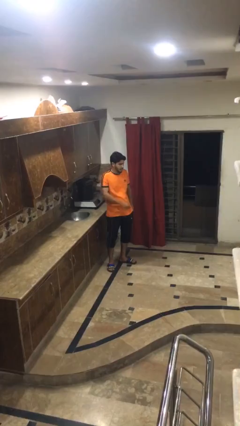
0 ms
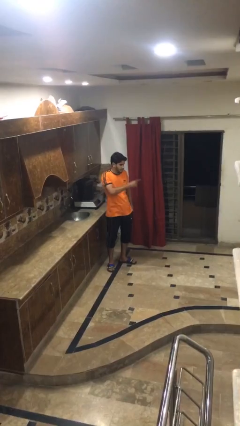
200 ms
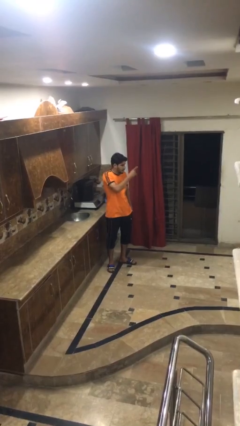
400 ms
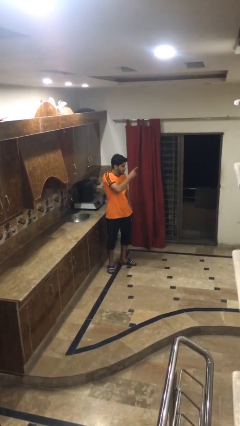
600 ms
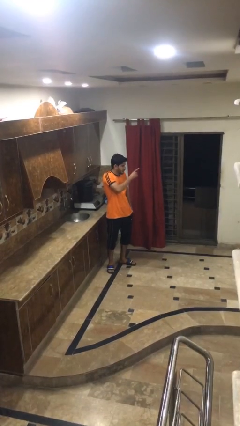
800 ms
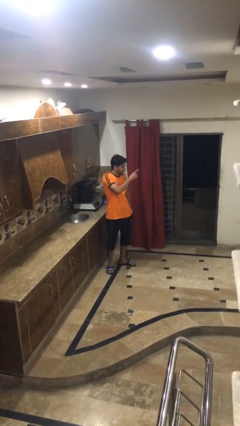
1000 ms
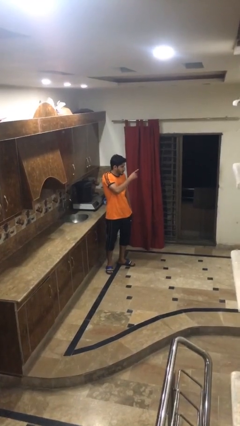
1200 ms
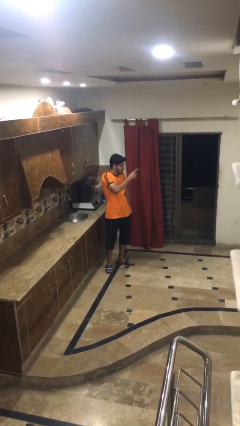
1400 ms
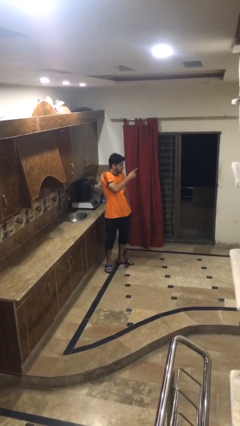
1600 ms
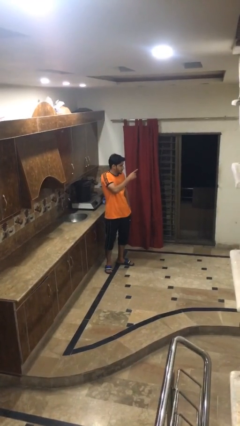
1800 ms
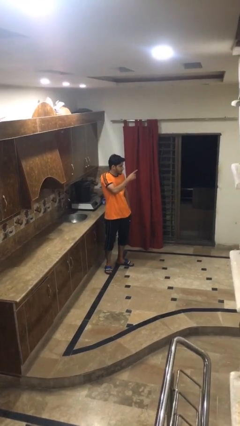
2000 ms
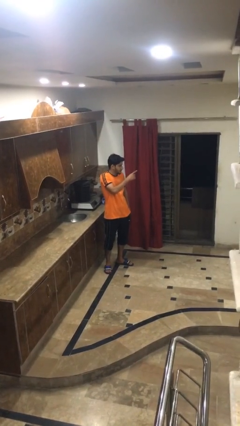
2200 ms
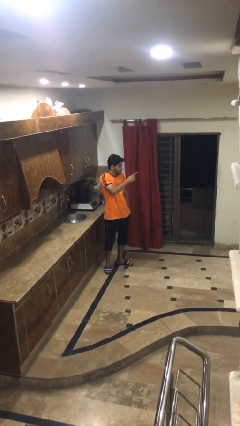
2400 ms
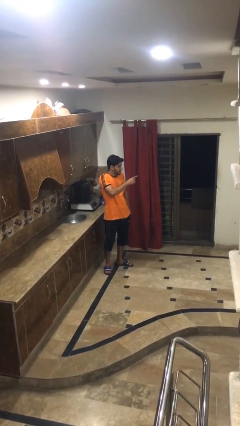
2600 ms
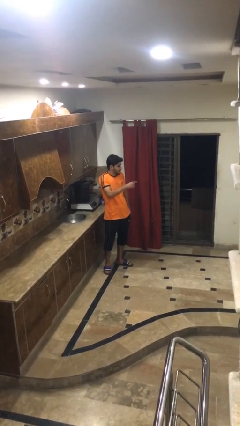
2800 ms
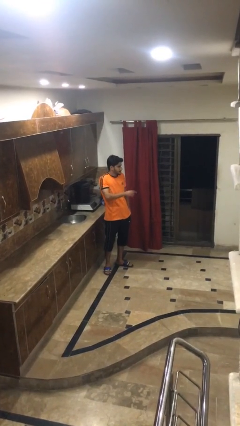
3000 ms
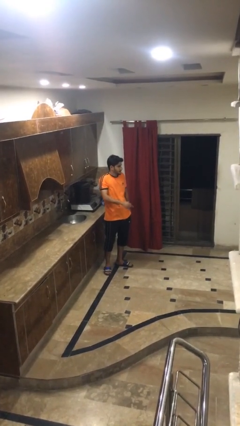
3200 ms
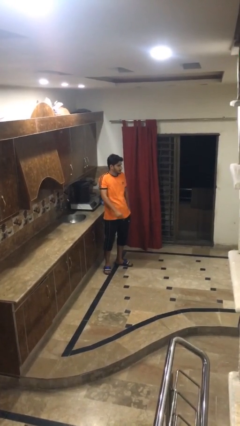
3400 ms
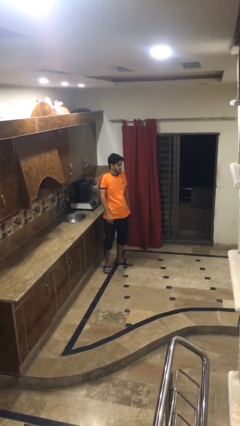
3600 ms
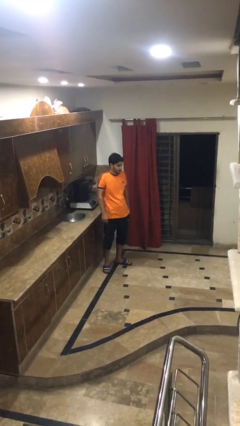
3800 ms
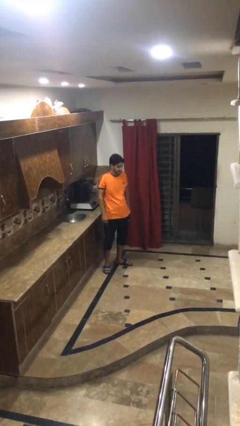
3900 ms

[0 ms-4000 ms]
person points at person

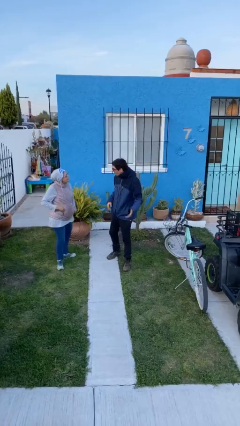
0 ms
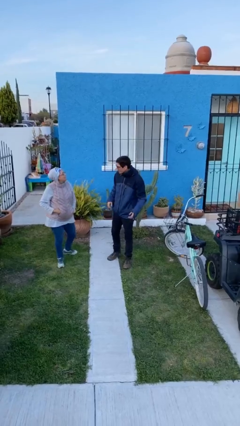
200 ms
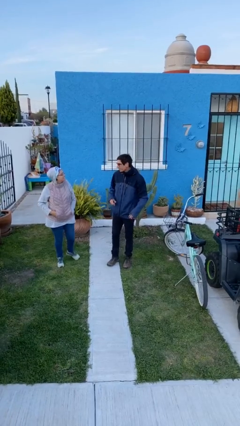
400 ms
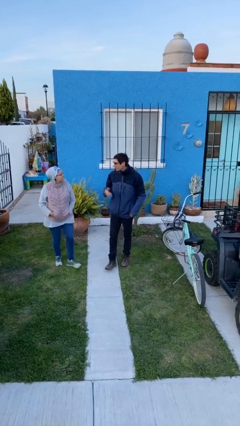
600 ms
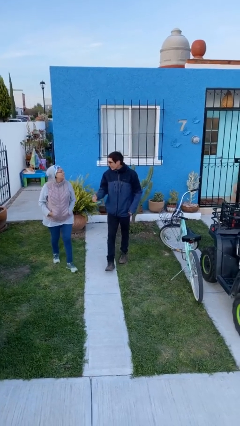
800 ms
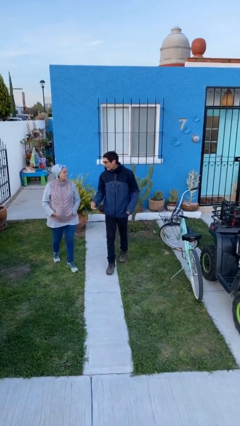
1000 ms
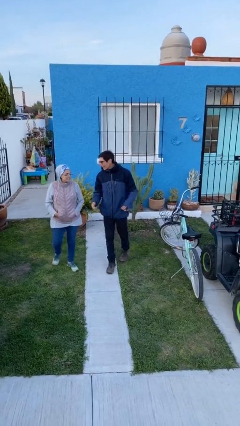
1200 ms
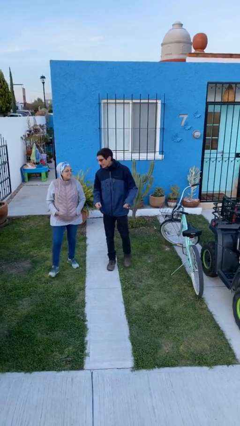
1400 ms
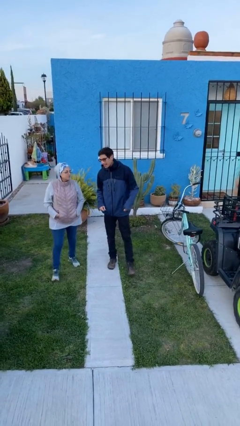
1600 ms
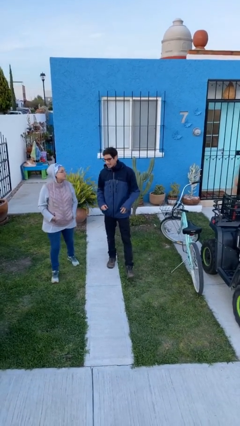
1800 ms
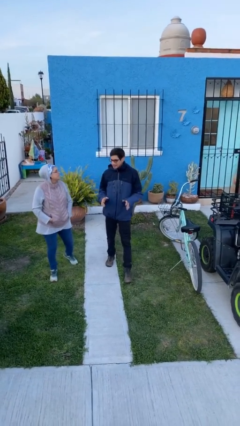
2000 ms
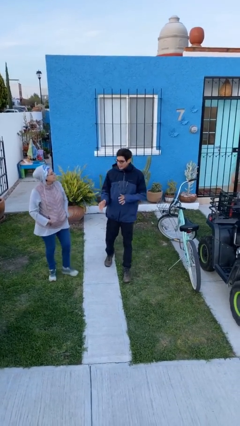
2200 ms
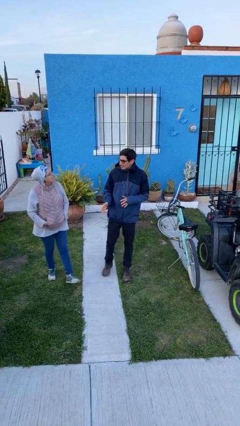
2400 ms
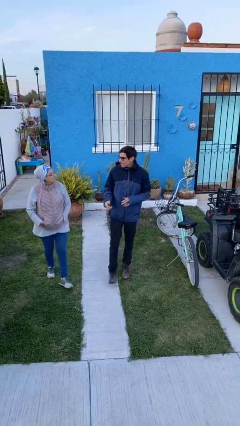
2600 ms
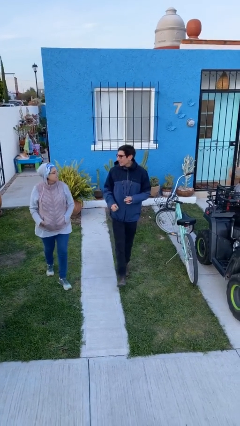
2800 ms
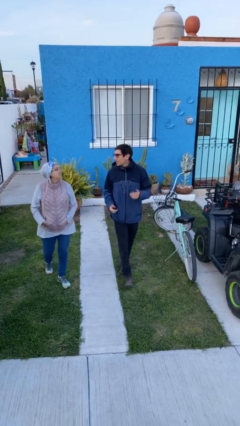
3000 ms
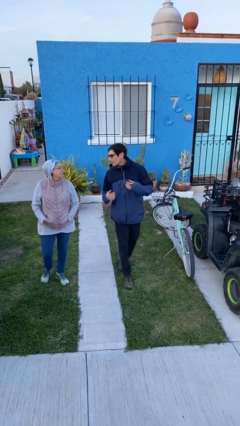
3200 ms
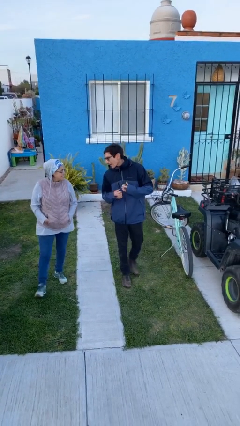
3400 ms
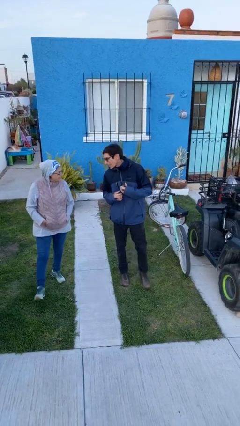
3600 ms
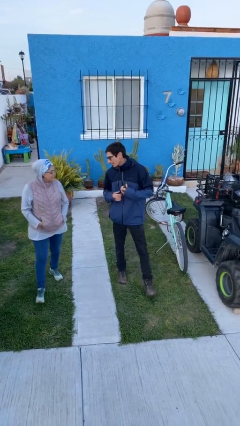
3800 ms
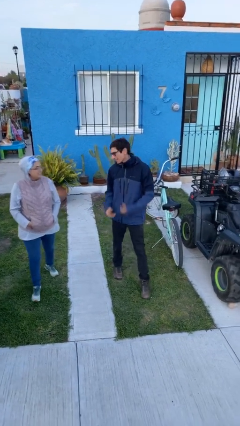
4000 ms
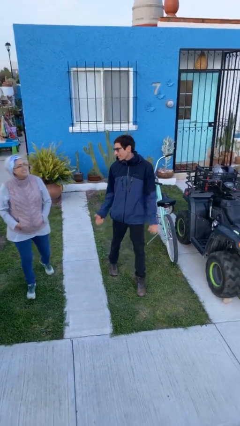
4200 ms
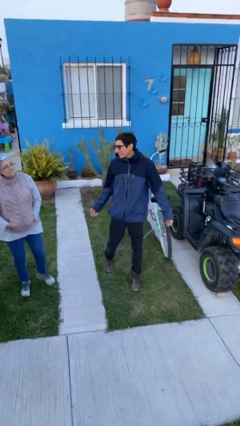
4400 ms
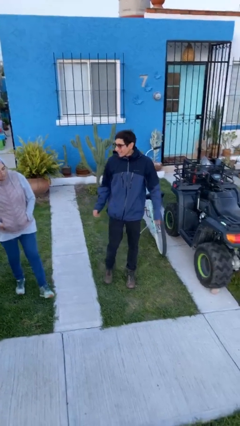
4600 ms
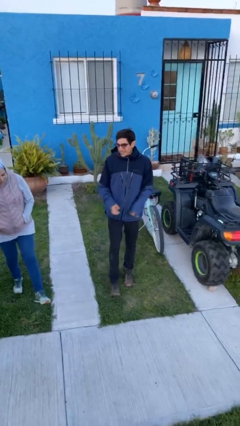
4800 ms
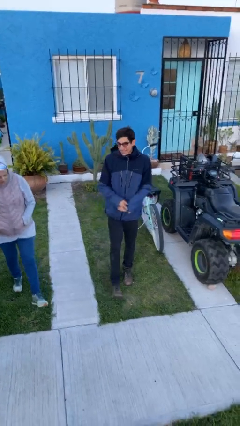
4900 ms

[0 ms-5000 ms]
person talks to person

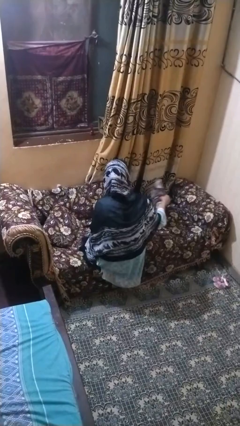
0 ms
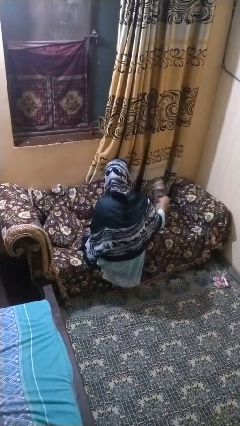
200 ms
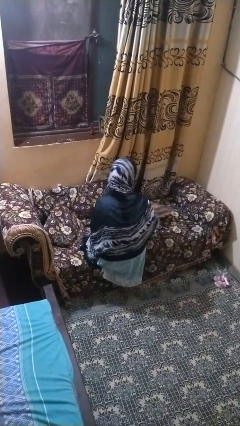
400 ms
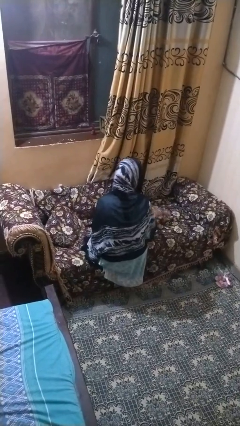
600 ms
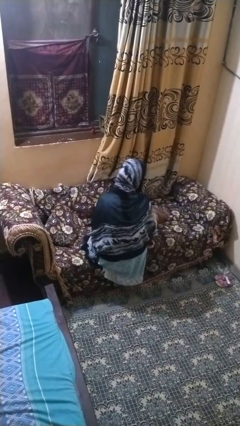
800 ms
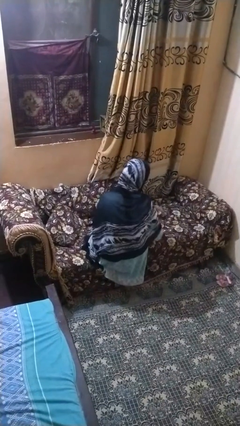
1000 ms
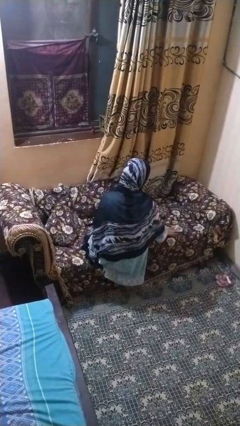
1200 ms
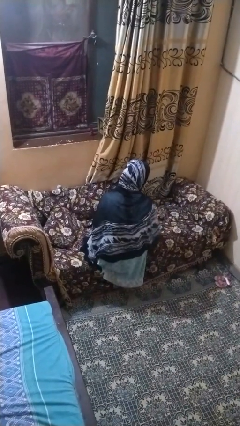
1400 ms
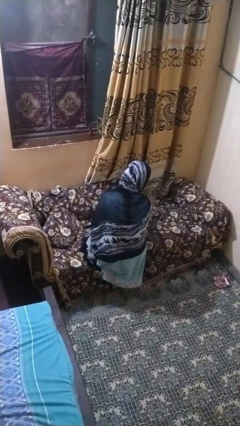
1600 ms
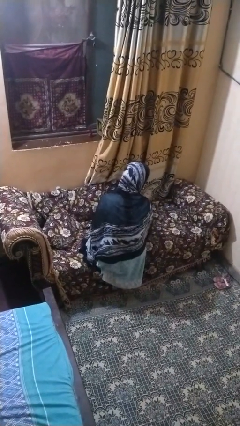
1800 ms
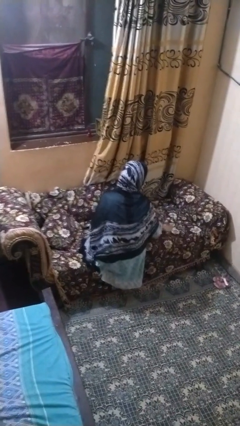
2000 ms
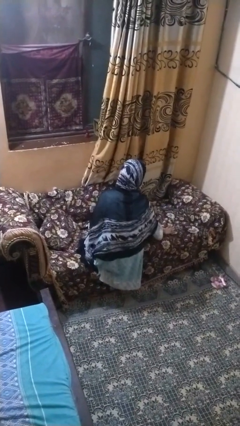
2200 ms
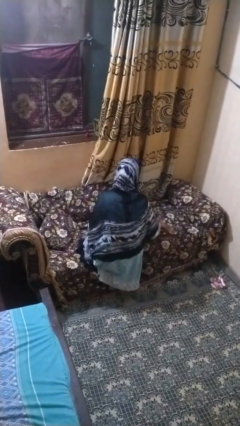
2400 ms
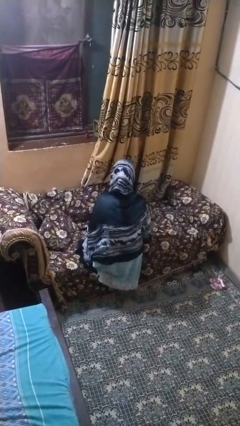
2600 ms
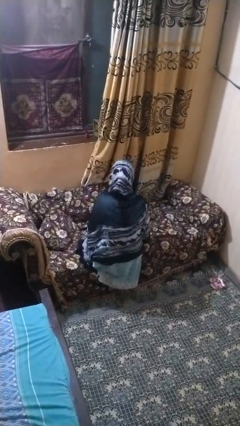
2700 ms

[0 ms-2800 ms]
person searches in couch

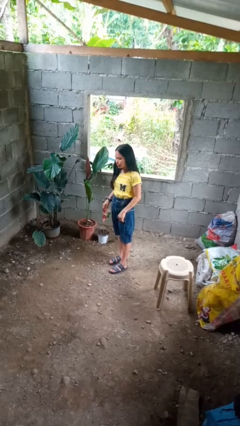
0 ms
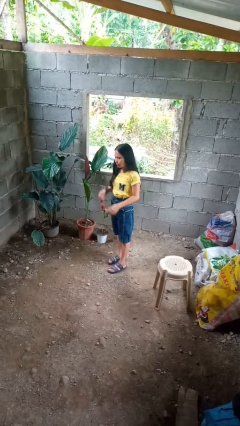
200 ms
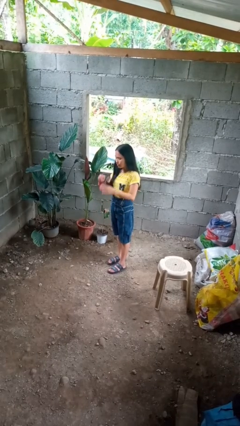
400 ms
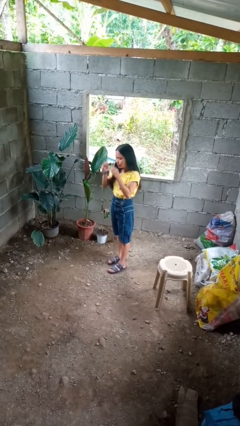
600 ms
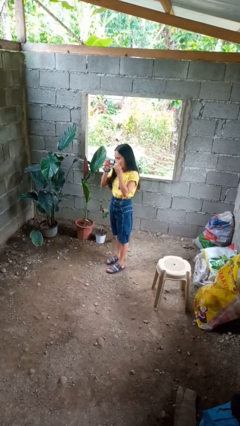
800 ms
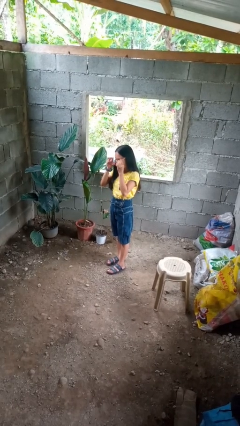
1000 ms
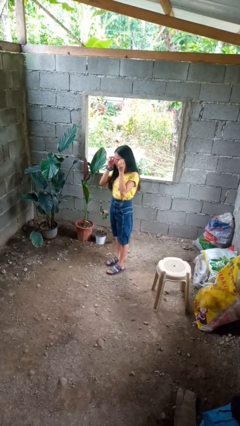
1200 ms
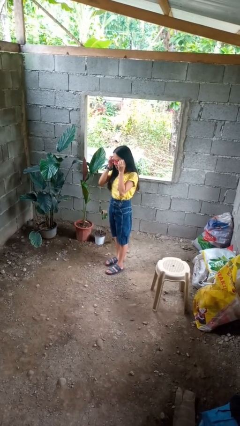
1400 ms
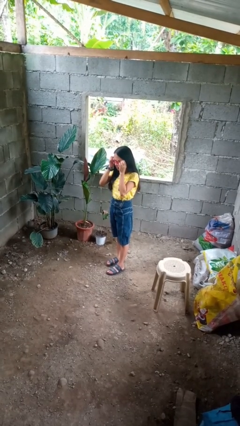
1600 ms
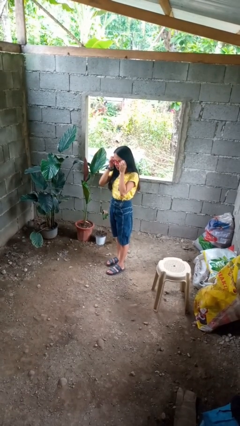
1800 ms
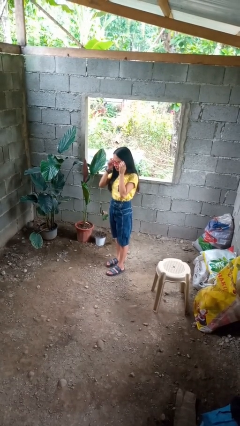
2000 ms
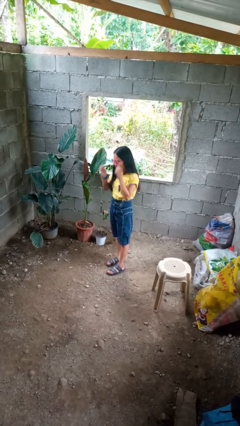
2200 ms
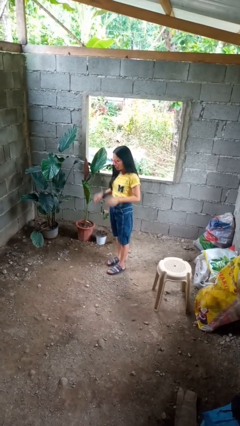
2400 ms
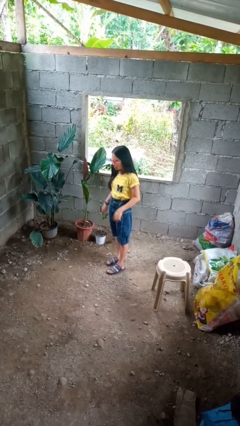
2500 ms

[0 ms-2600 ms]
person puts on sunglasses

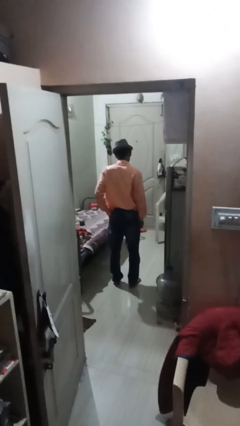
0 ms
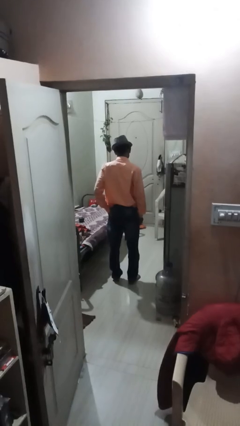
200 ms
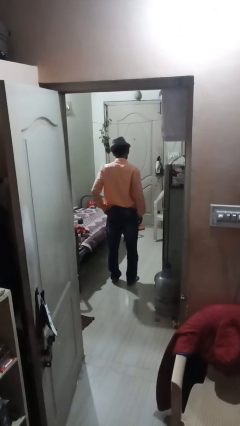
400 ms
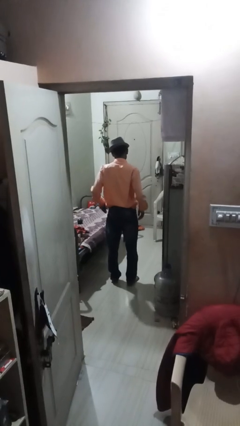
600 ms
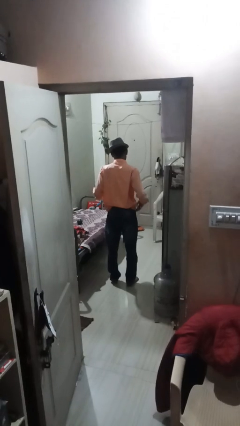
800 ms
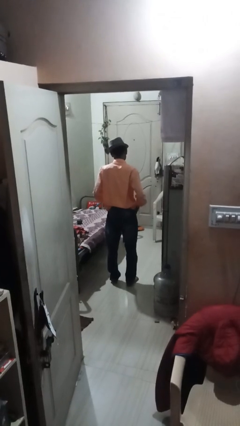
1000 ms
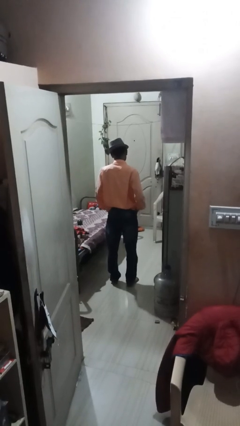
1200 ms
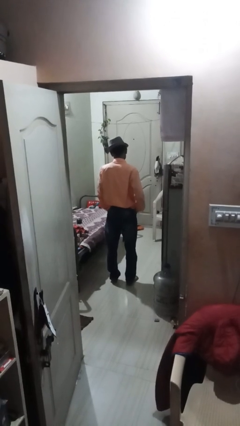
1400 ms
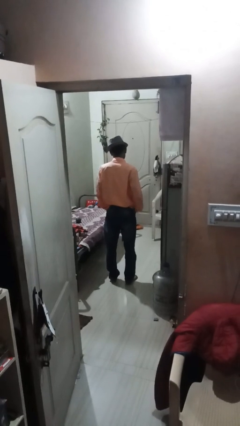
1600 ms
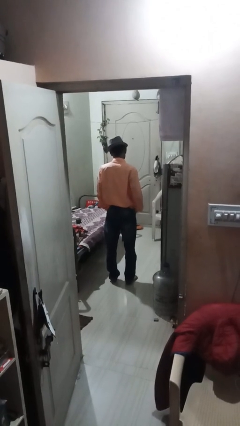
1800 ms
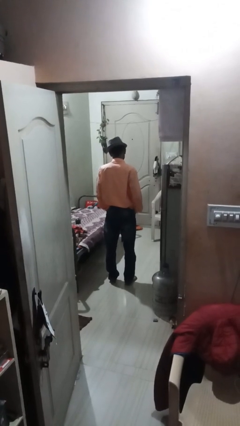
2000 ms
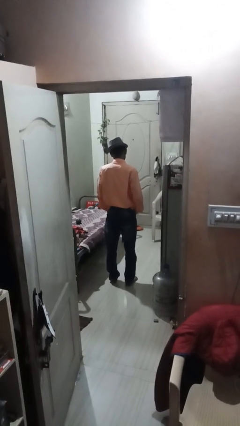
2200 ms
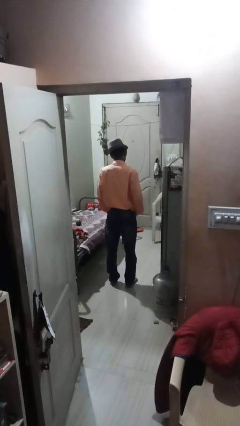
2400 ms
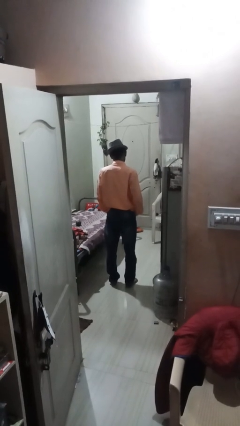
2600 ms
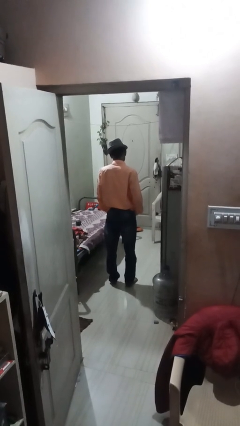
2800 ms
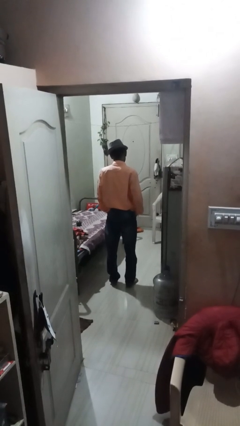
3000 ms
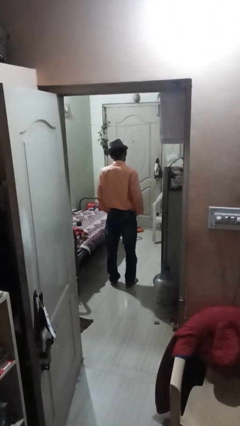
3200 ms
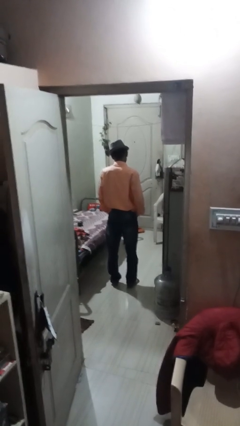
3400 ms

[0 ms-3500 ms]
person puts hands in back pockets
